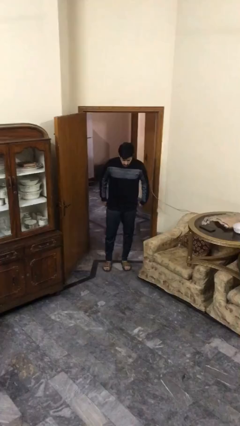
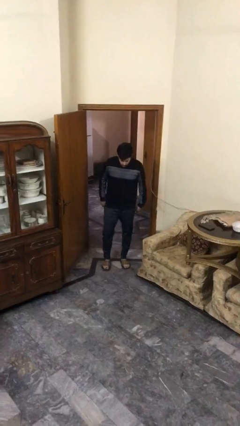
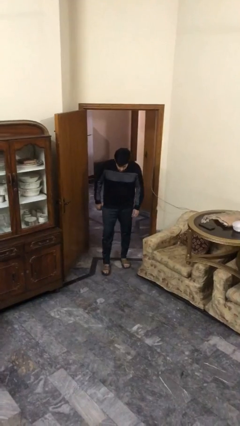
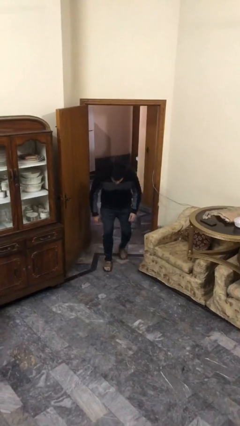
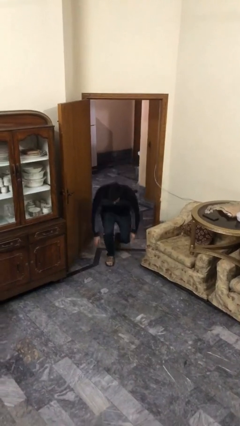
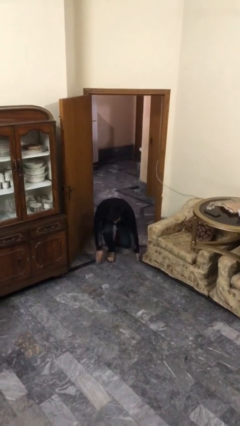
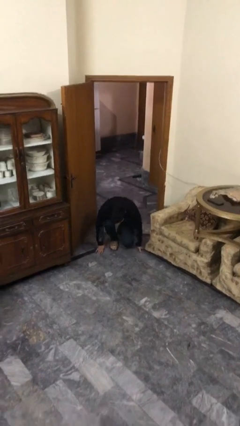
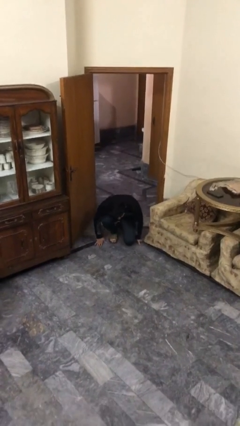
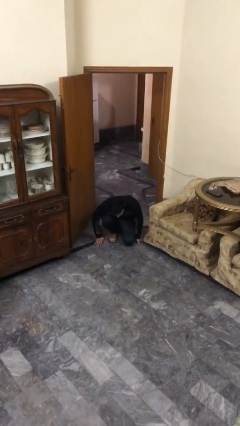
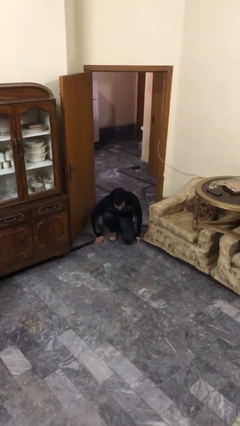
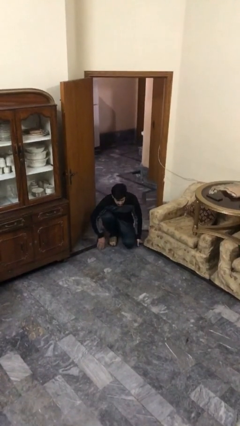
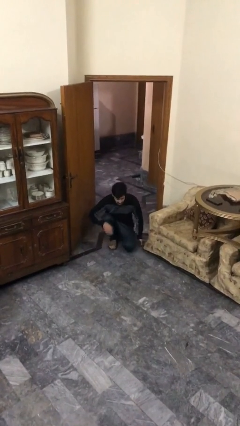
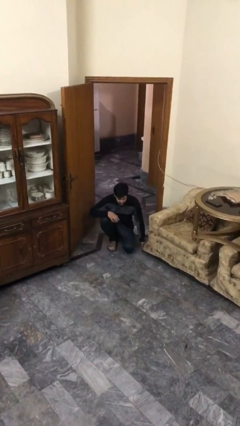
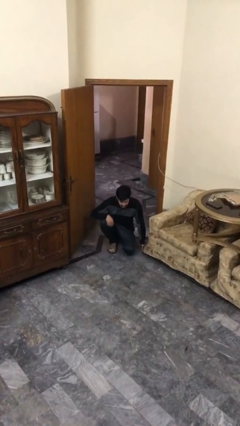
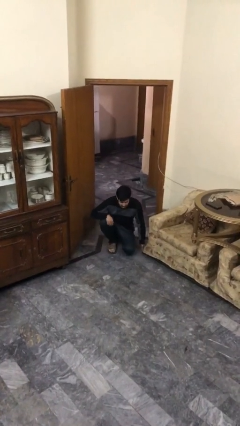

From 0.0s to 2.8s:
person sits down

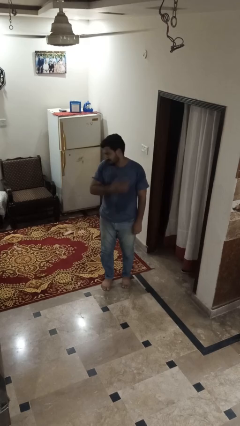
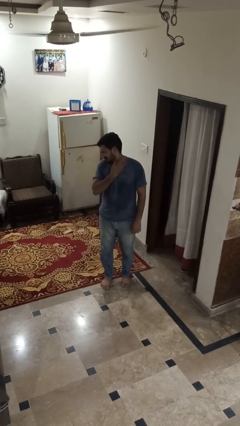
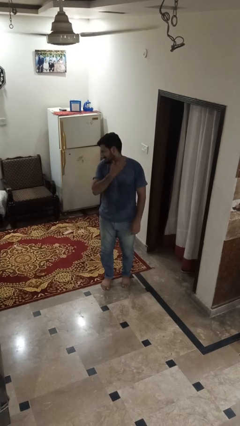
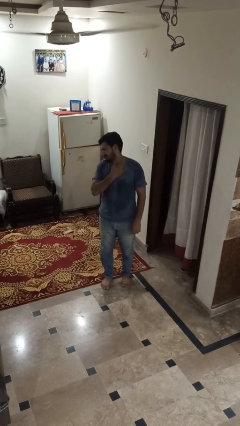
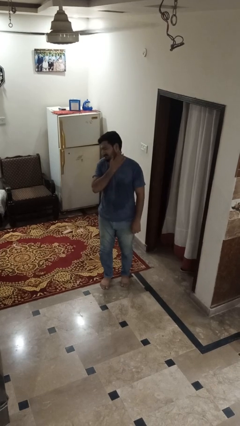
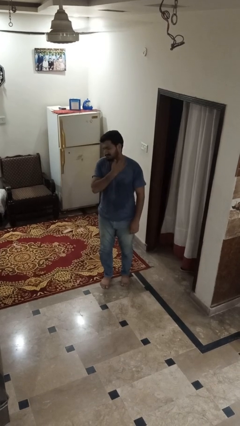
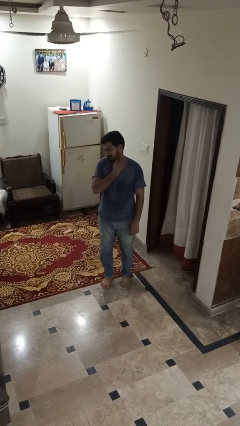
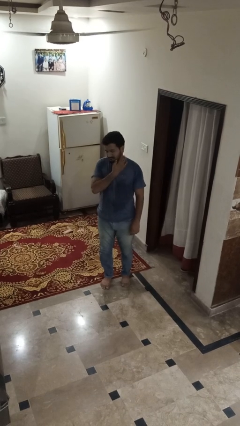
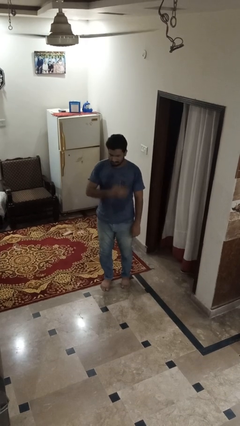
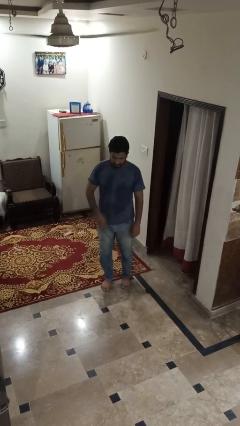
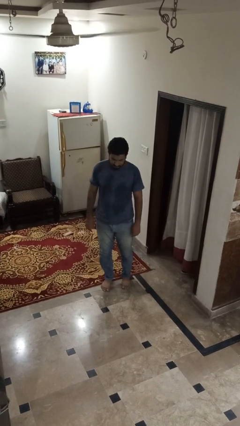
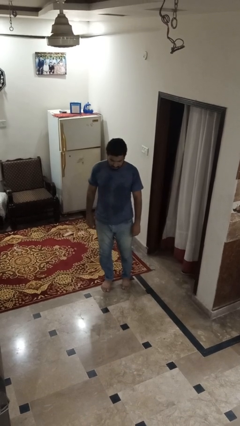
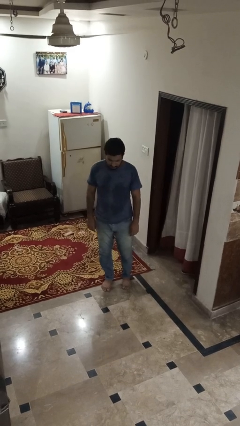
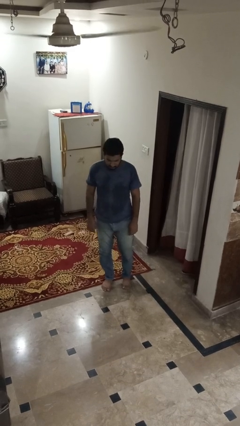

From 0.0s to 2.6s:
person swats bug

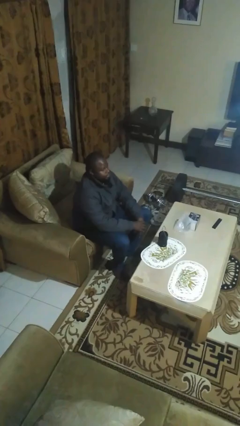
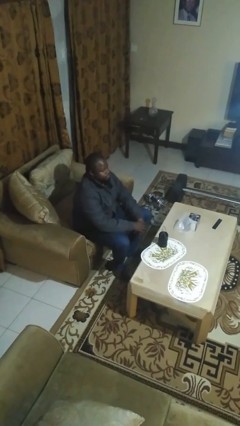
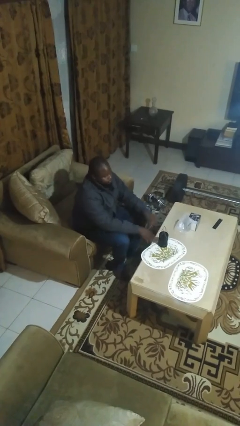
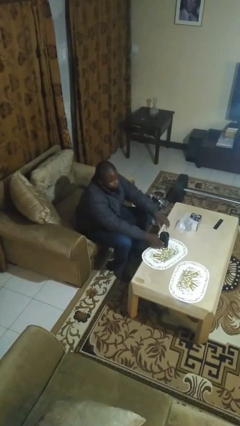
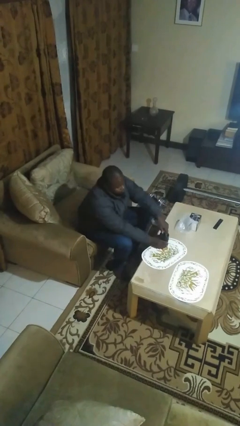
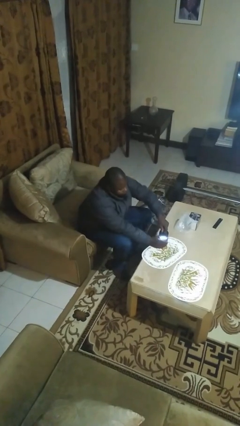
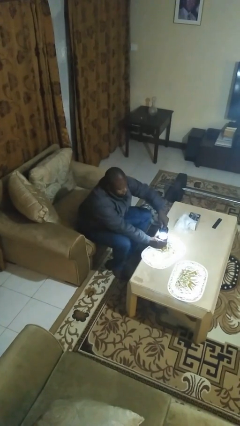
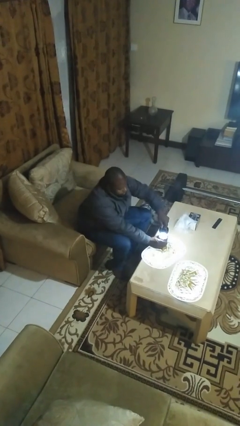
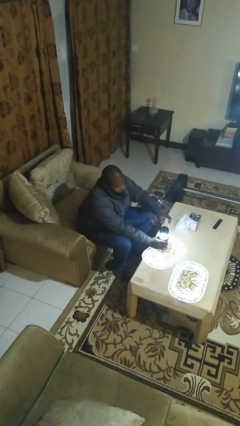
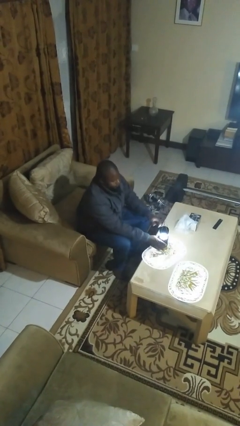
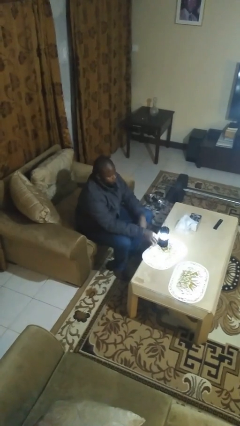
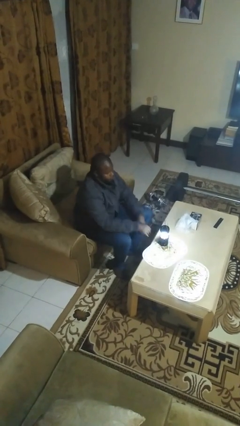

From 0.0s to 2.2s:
person turns on lamp

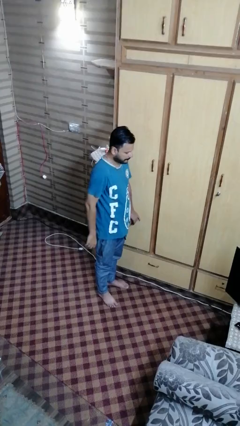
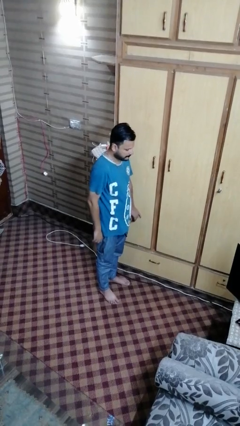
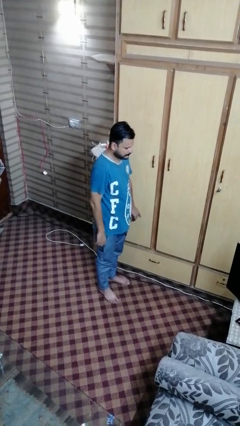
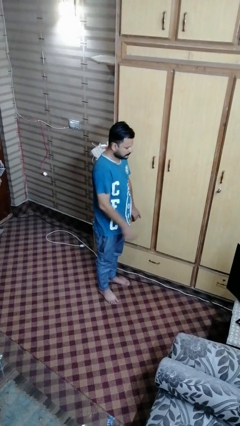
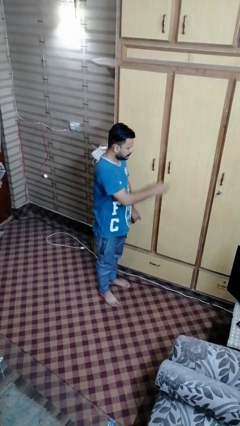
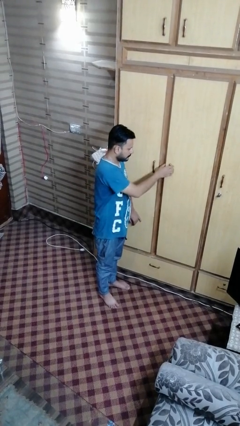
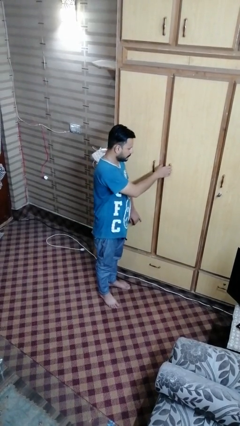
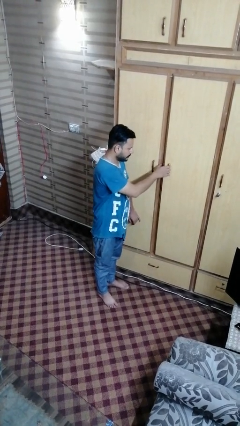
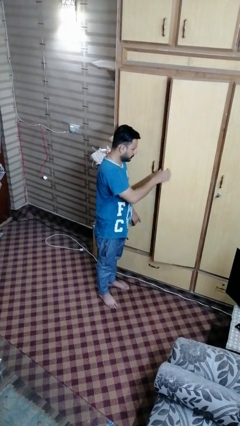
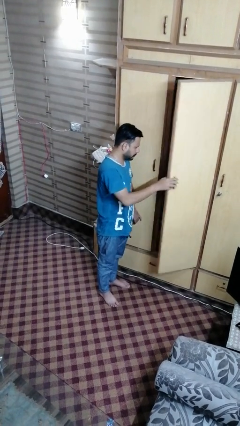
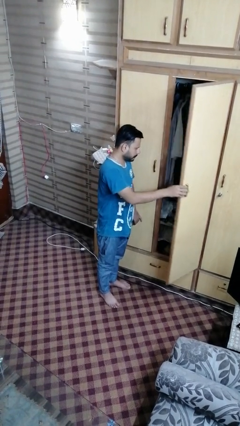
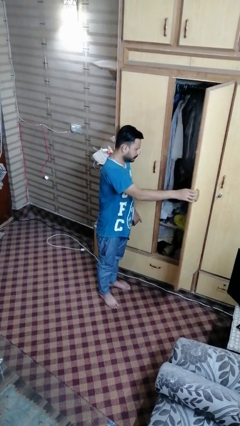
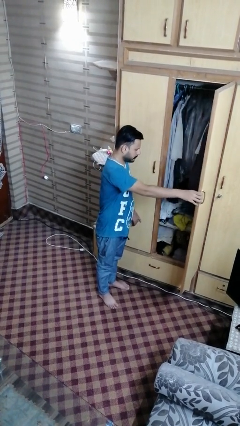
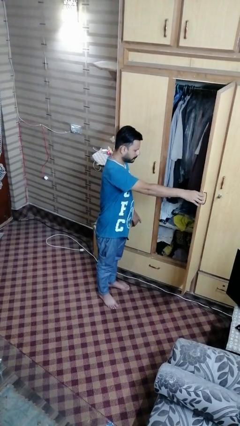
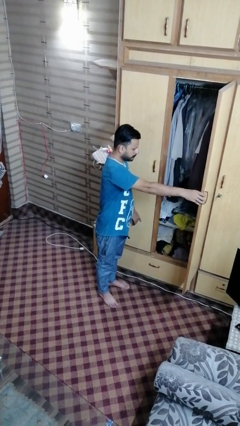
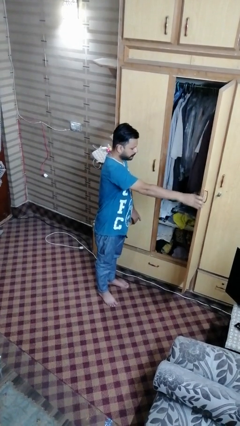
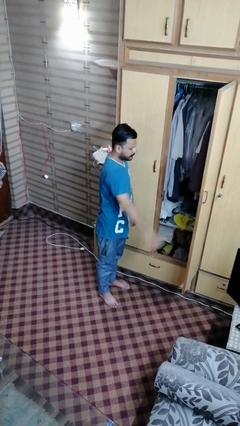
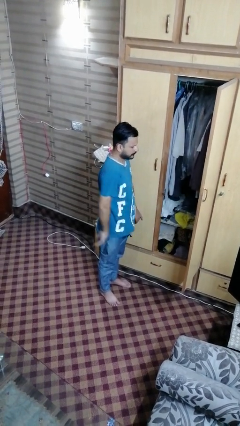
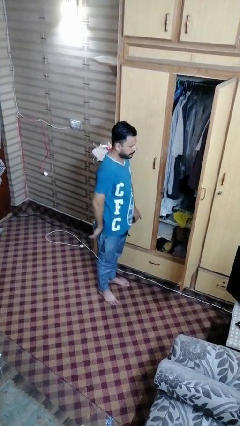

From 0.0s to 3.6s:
person opens closet door

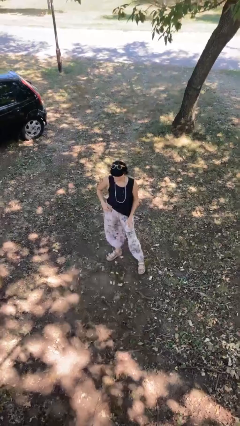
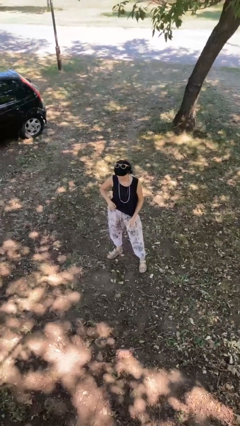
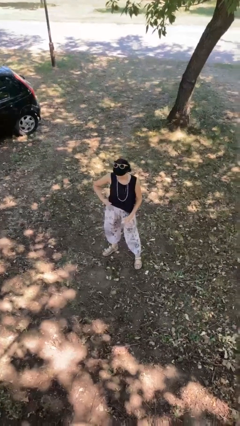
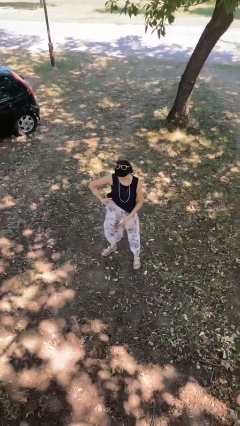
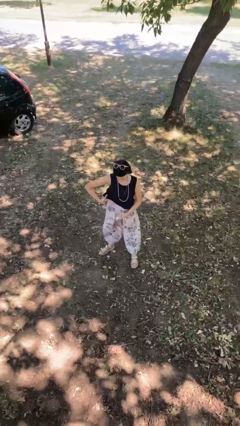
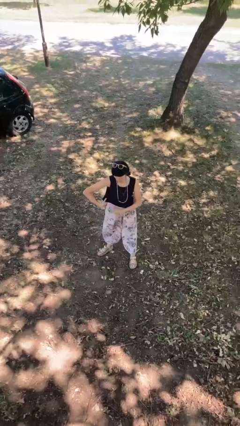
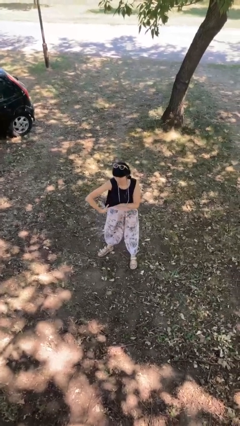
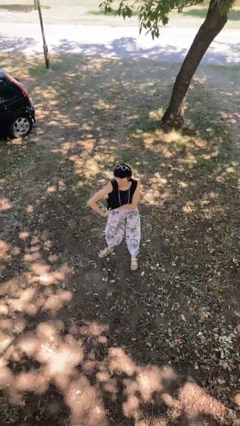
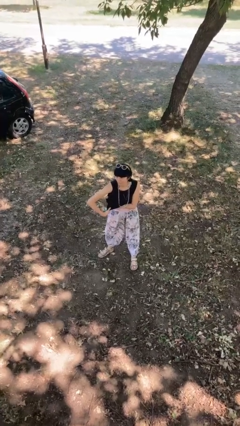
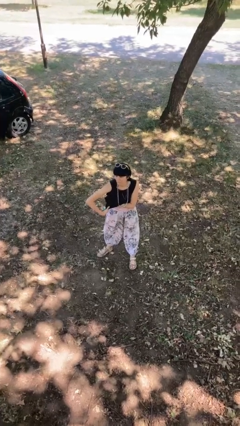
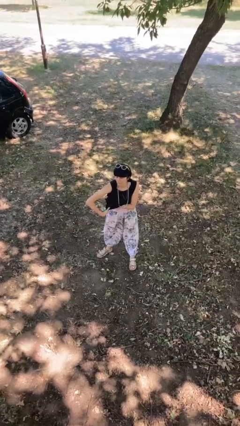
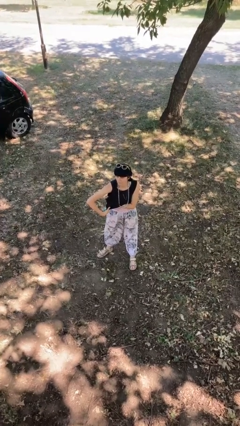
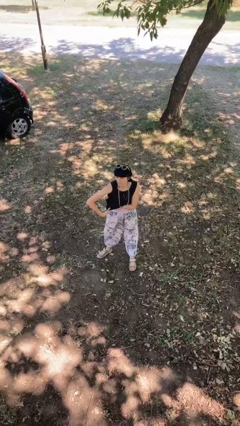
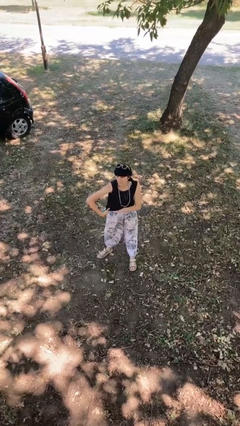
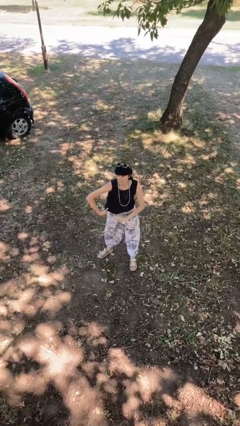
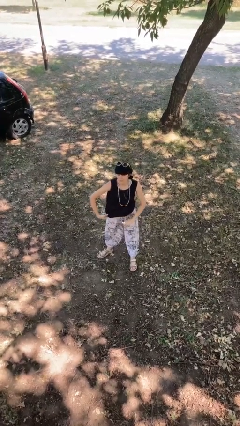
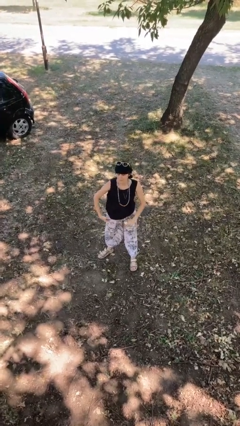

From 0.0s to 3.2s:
person applies deodorant

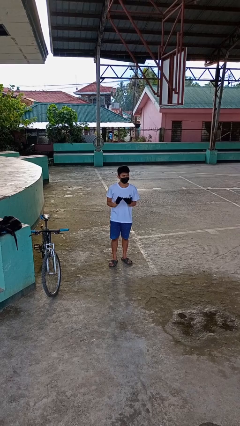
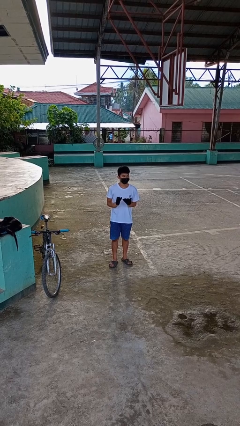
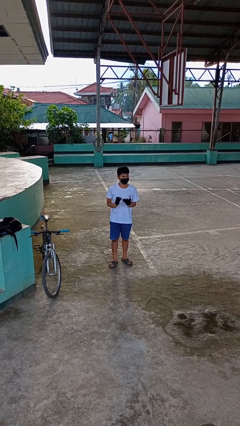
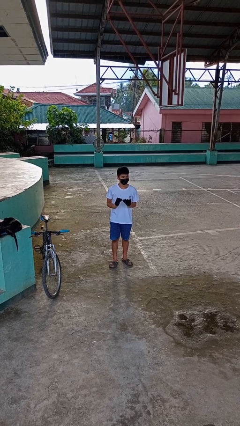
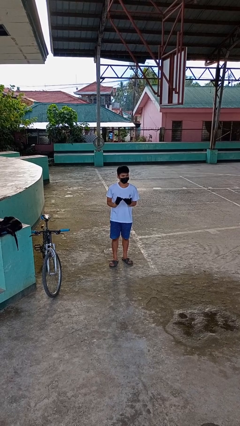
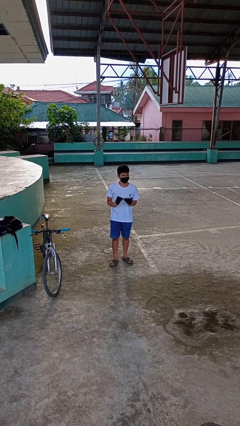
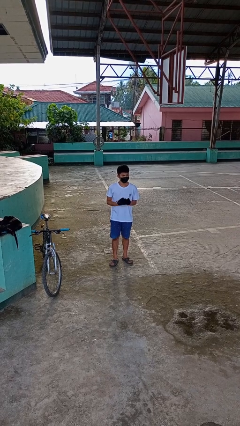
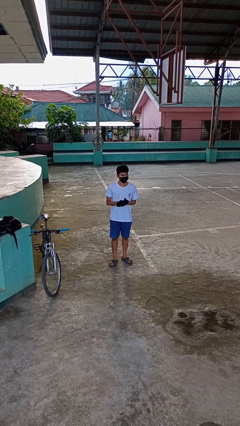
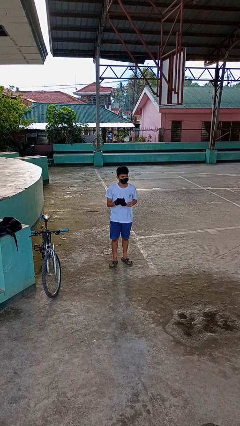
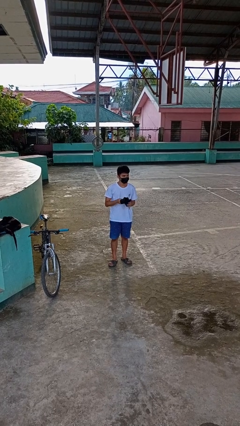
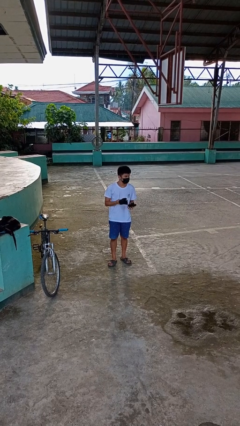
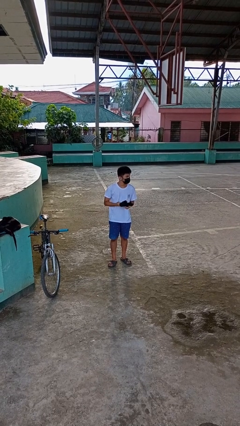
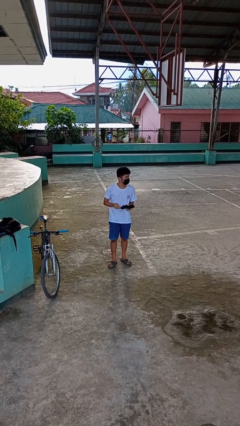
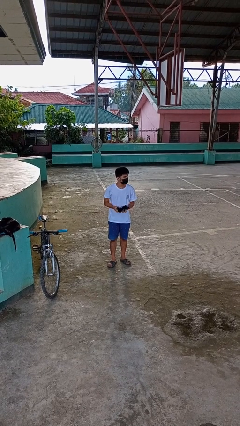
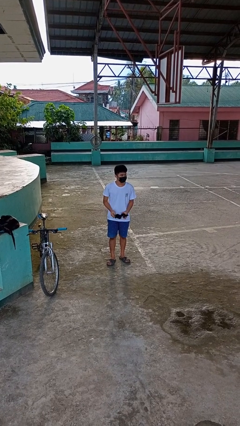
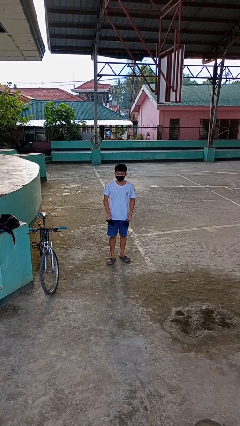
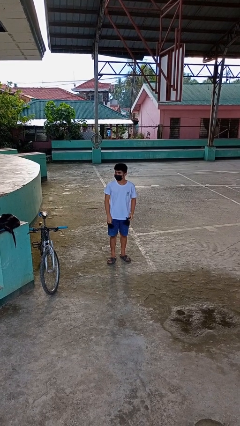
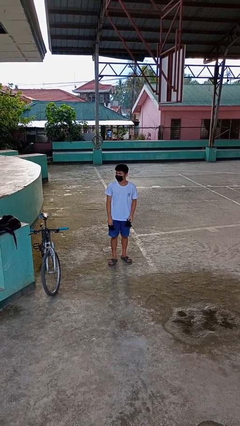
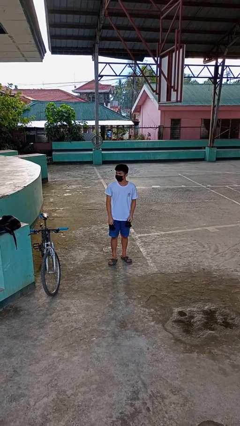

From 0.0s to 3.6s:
person takes off gloves
